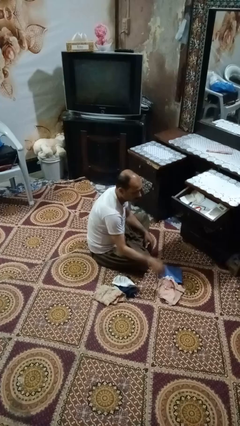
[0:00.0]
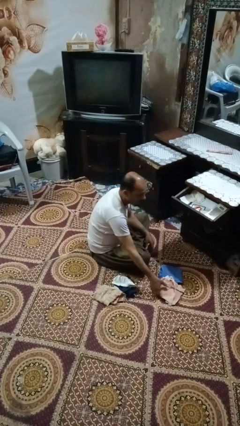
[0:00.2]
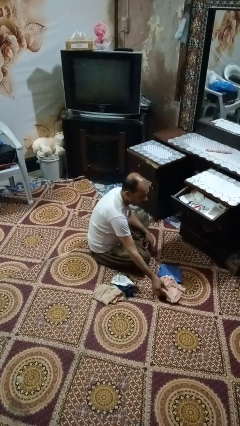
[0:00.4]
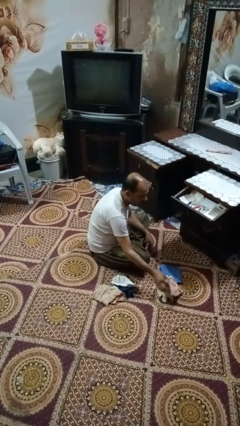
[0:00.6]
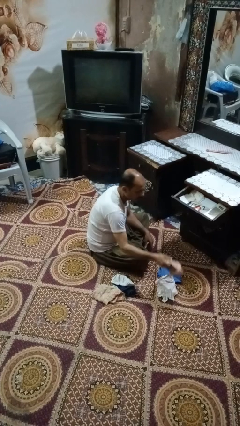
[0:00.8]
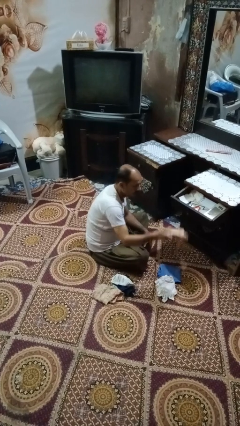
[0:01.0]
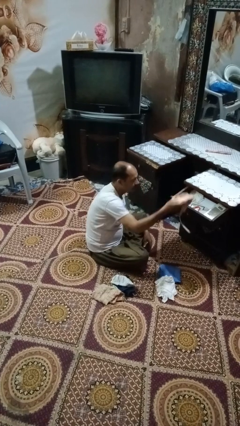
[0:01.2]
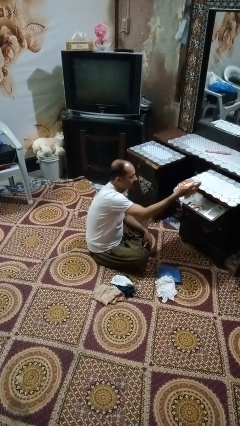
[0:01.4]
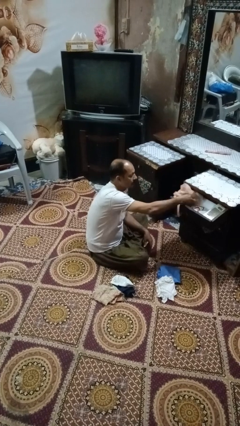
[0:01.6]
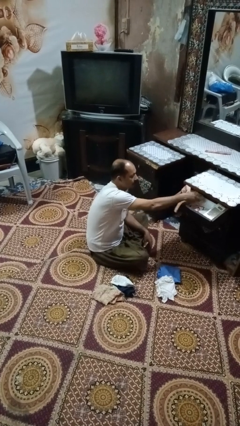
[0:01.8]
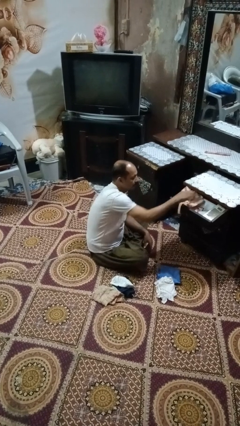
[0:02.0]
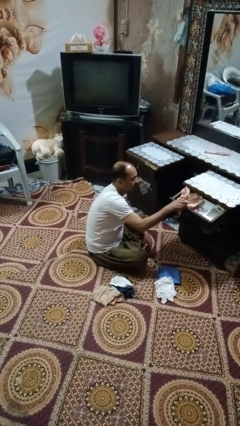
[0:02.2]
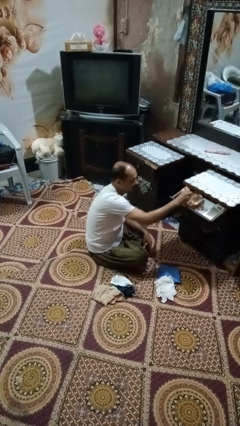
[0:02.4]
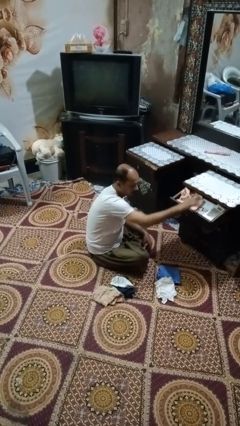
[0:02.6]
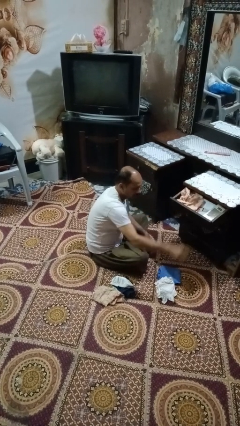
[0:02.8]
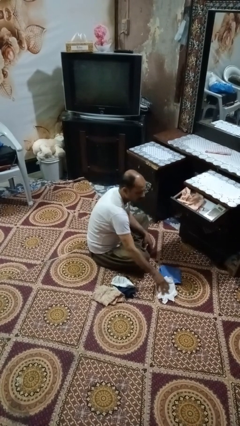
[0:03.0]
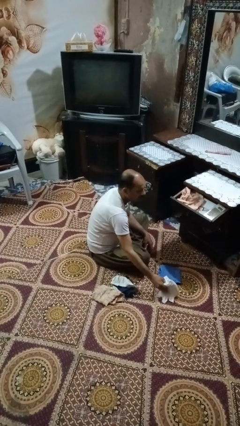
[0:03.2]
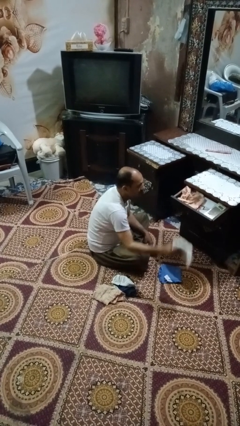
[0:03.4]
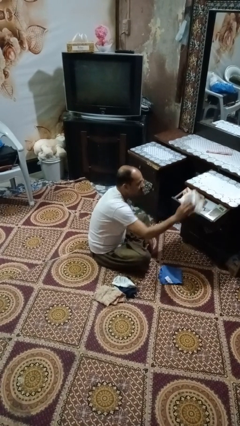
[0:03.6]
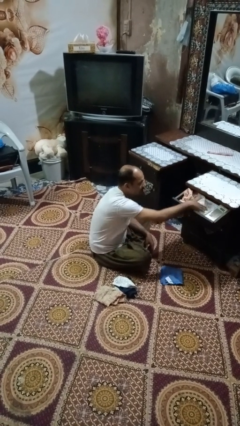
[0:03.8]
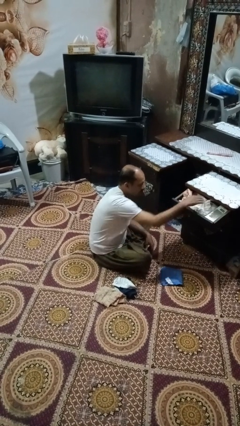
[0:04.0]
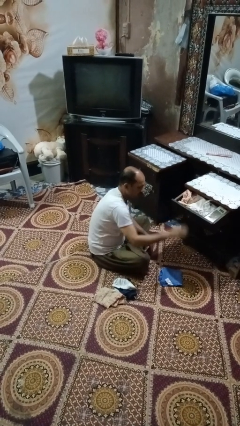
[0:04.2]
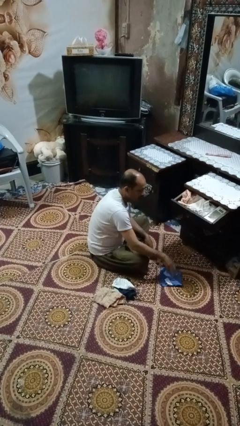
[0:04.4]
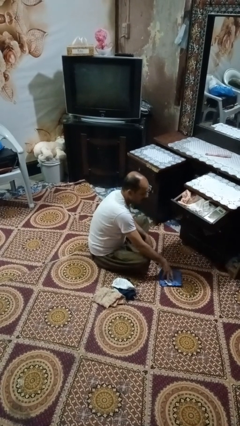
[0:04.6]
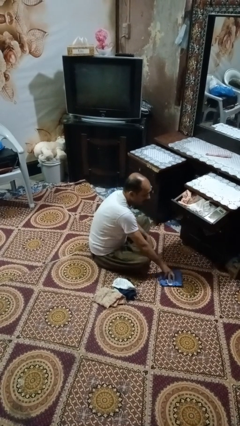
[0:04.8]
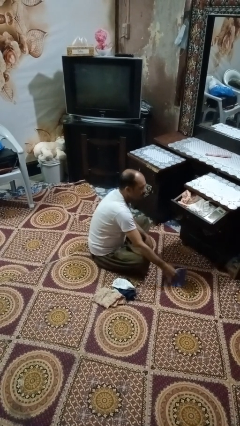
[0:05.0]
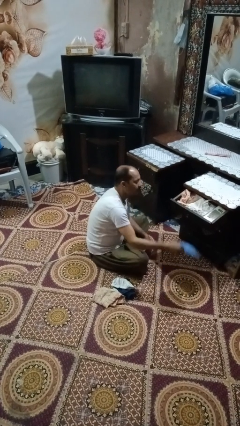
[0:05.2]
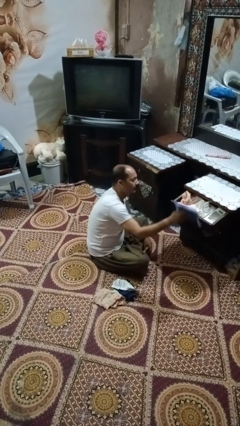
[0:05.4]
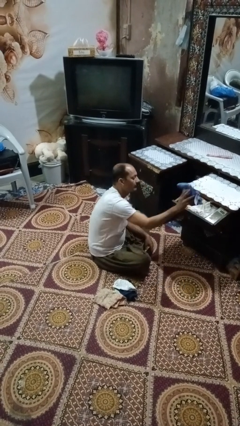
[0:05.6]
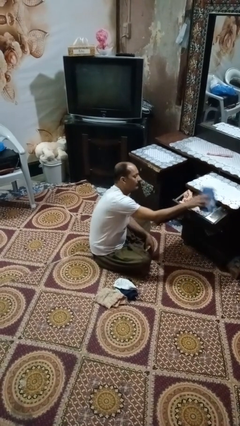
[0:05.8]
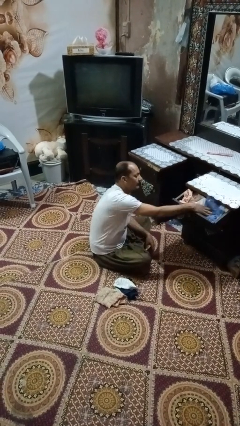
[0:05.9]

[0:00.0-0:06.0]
person puts clothes into dresser

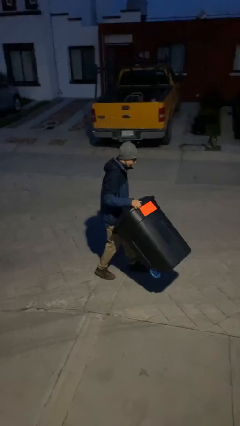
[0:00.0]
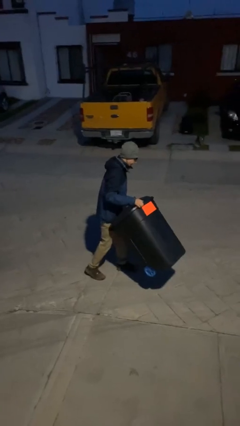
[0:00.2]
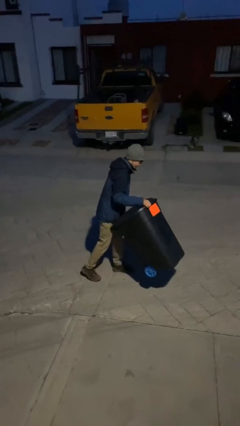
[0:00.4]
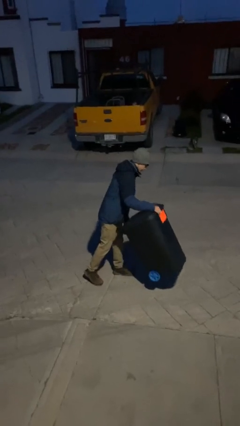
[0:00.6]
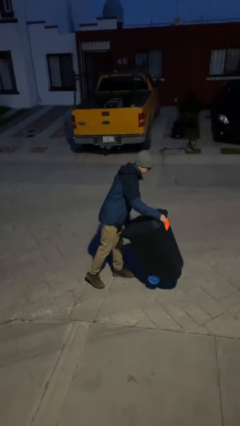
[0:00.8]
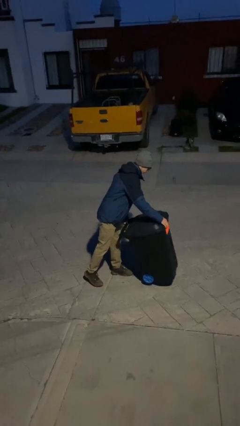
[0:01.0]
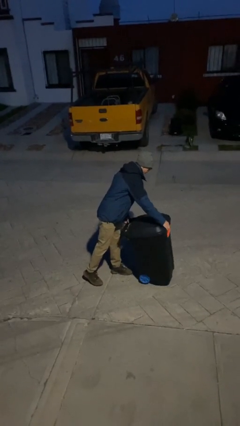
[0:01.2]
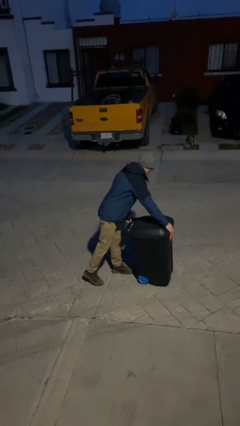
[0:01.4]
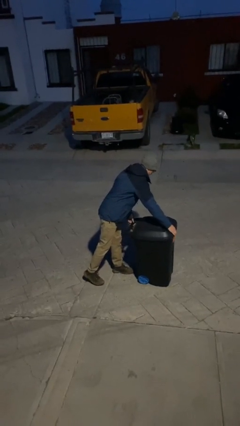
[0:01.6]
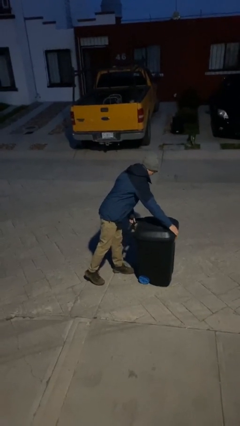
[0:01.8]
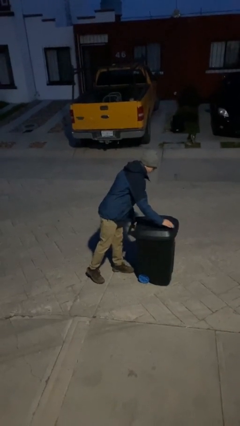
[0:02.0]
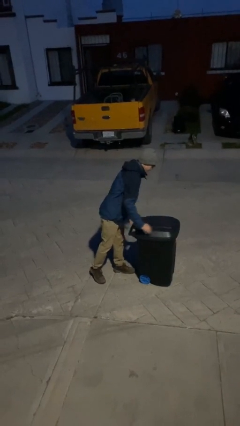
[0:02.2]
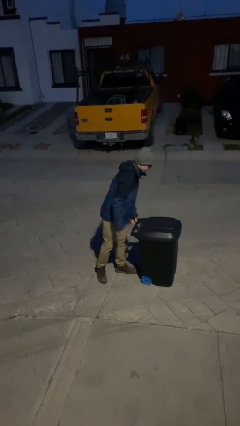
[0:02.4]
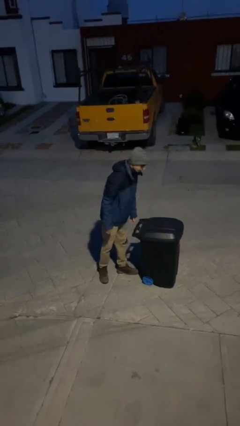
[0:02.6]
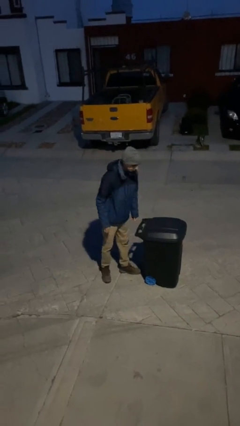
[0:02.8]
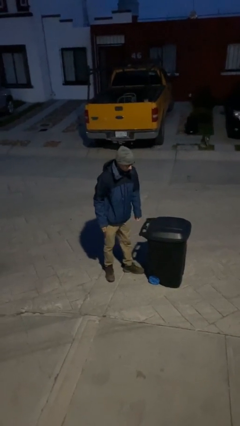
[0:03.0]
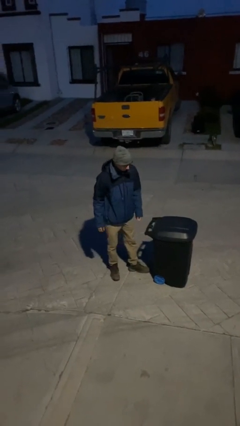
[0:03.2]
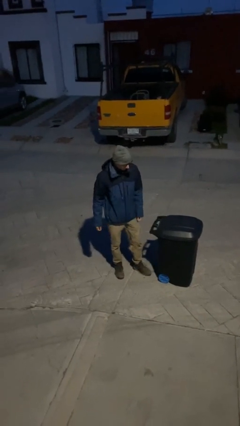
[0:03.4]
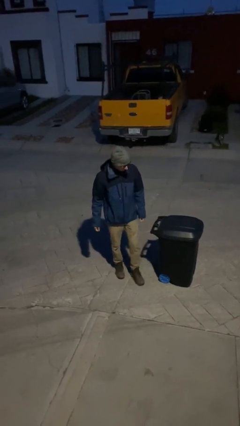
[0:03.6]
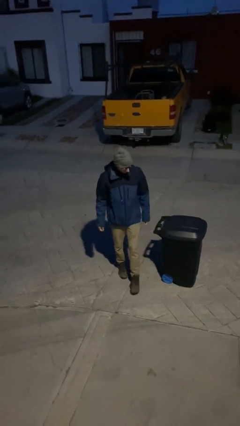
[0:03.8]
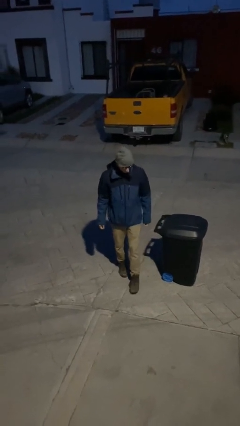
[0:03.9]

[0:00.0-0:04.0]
person puts down object on floor

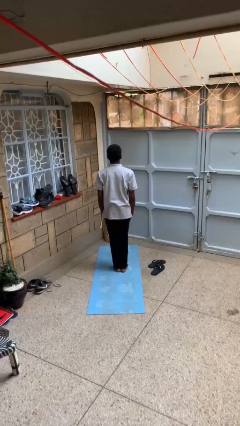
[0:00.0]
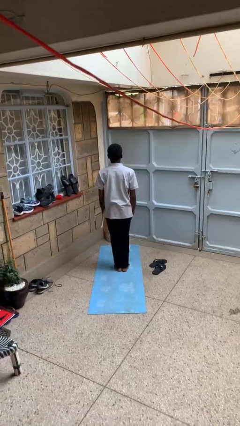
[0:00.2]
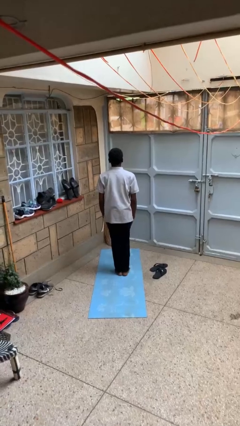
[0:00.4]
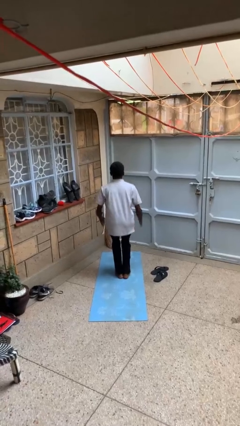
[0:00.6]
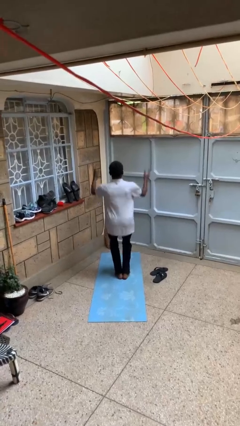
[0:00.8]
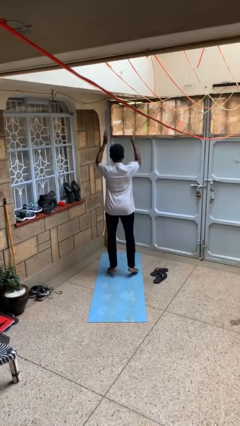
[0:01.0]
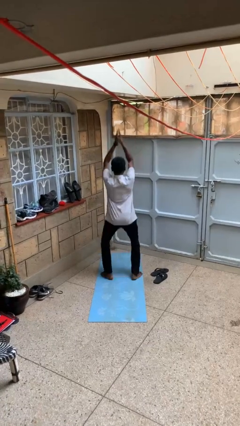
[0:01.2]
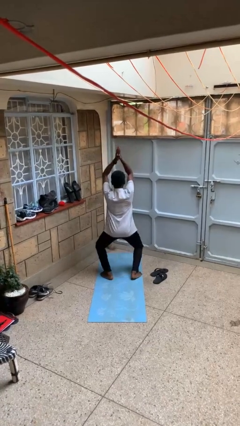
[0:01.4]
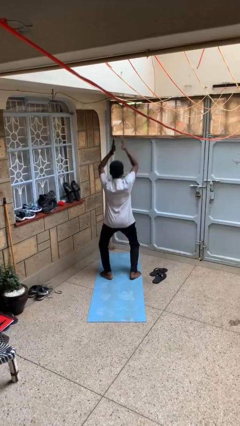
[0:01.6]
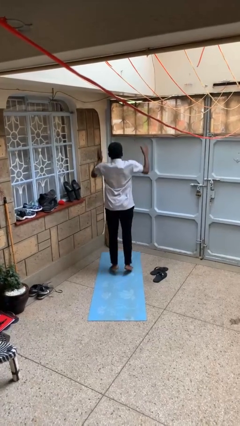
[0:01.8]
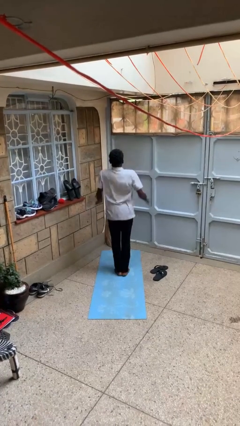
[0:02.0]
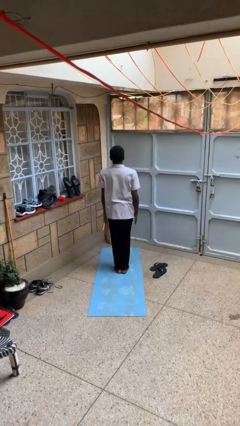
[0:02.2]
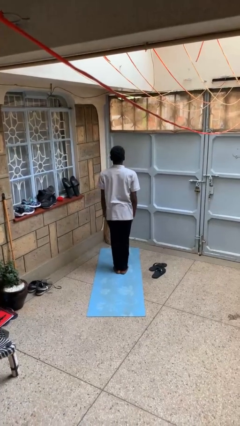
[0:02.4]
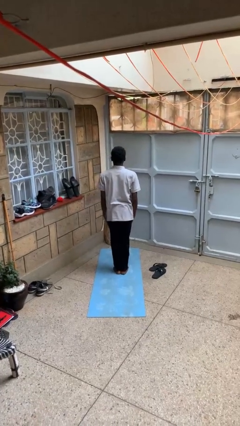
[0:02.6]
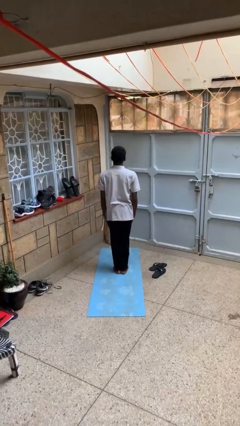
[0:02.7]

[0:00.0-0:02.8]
person exercises with jumping jacks

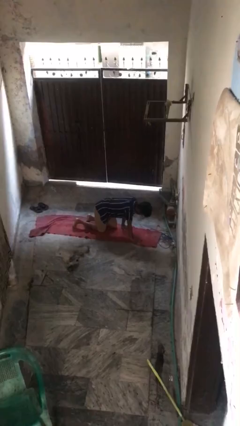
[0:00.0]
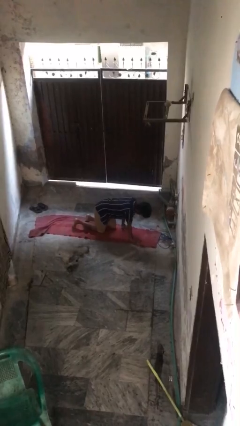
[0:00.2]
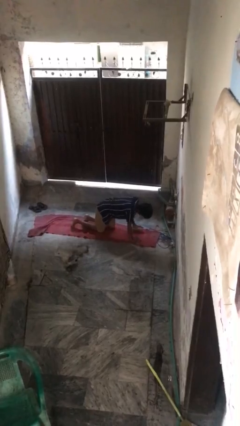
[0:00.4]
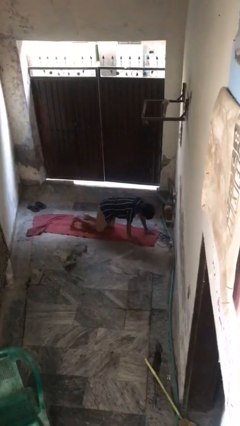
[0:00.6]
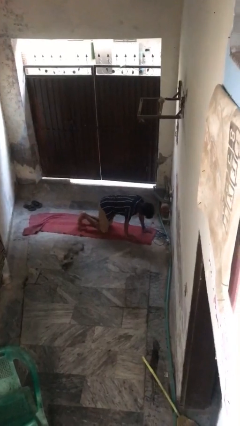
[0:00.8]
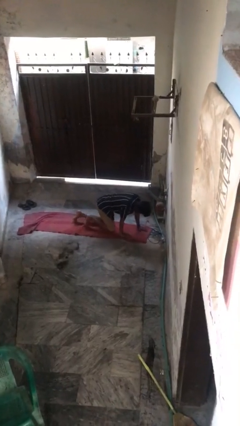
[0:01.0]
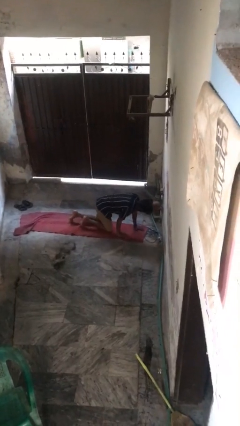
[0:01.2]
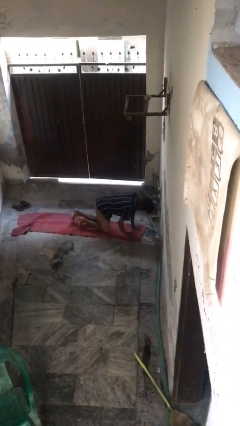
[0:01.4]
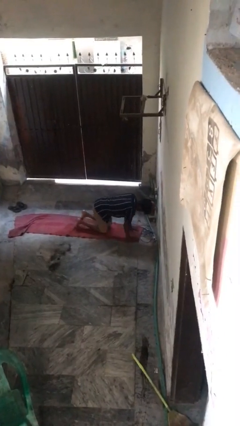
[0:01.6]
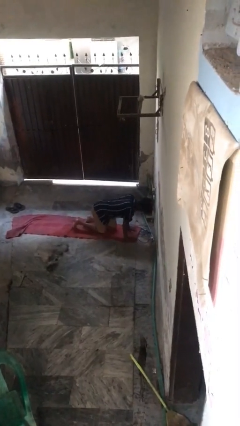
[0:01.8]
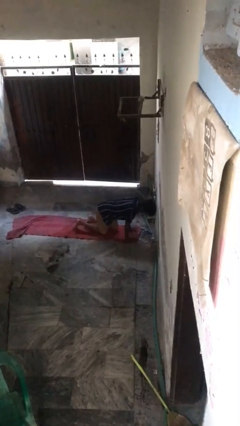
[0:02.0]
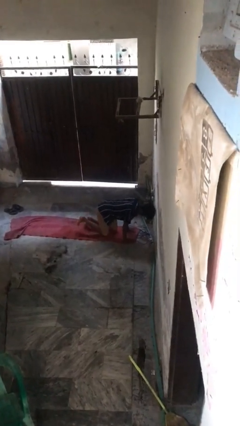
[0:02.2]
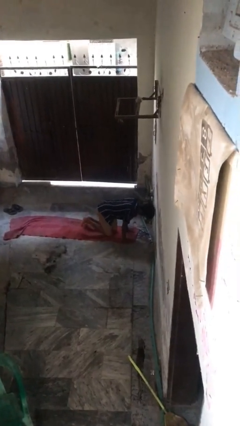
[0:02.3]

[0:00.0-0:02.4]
person crawls

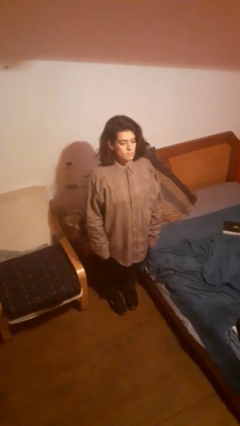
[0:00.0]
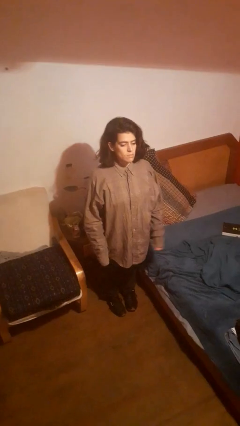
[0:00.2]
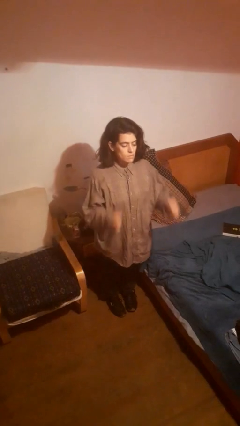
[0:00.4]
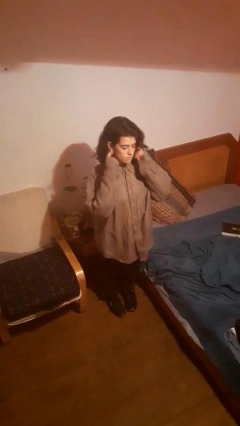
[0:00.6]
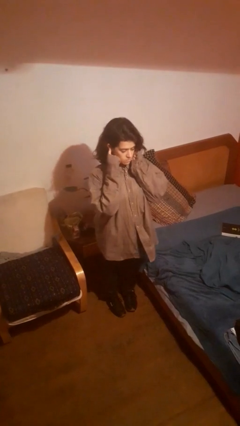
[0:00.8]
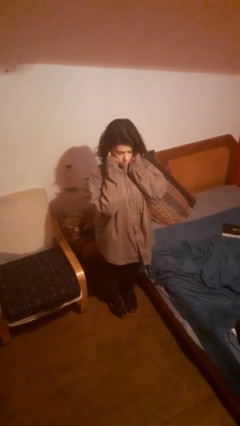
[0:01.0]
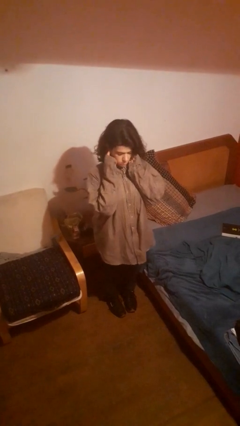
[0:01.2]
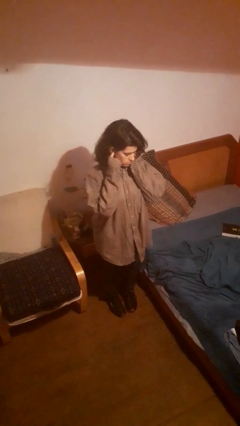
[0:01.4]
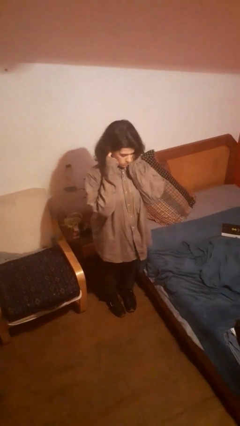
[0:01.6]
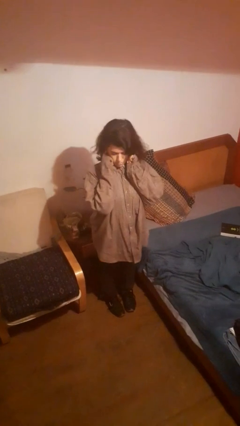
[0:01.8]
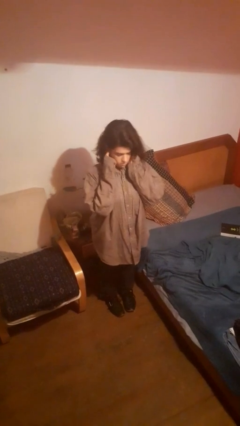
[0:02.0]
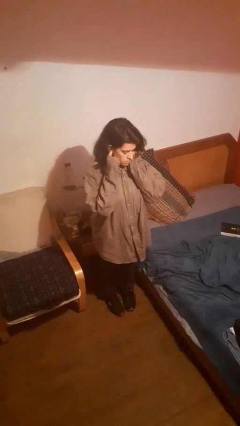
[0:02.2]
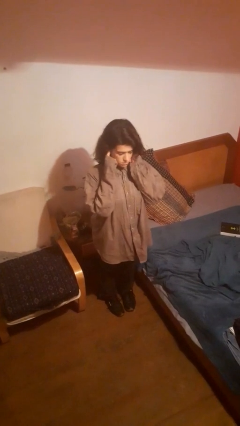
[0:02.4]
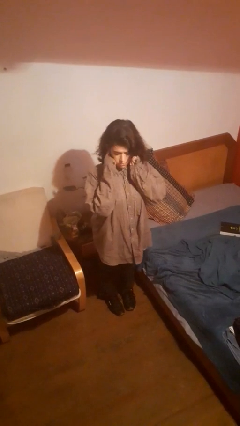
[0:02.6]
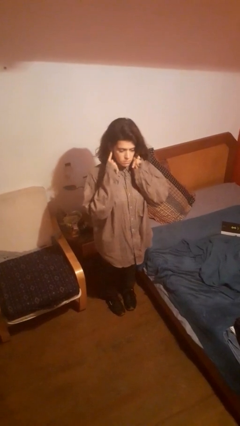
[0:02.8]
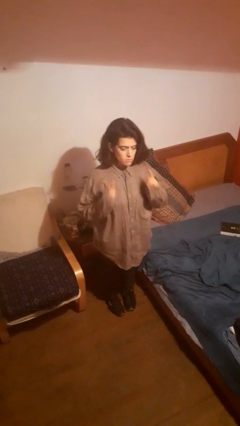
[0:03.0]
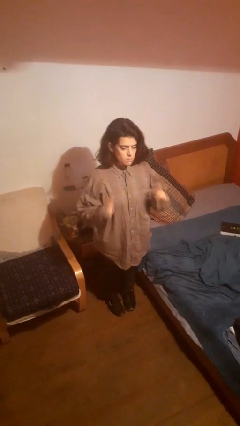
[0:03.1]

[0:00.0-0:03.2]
person puts fingers in ear
